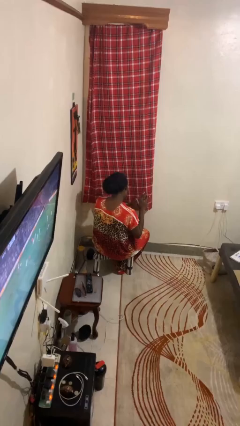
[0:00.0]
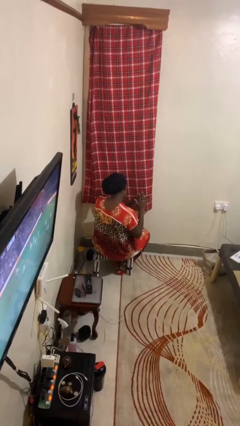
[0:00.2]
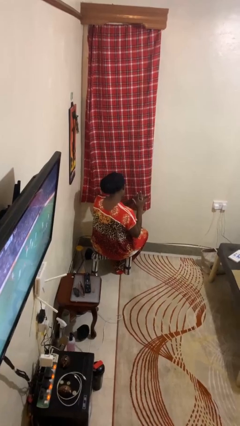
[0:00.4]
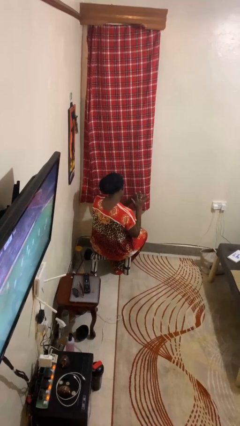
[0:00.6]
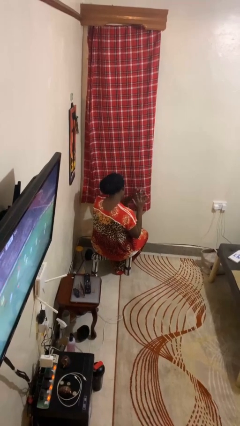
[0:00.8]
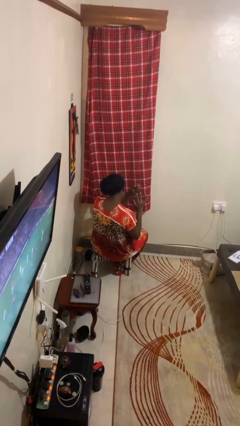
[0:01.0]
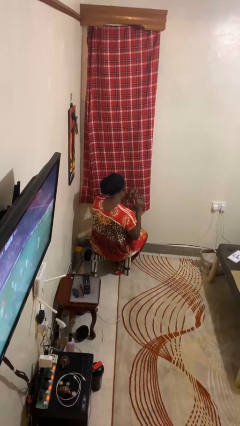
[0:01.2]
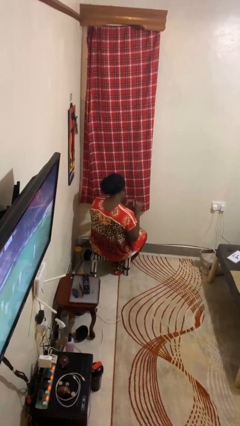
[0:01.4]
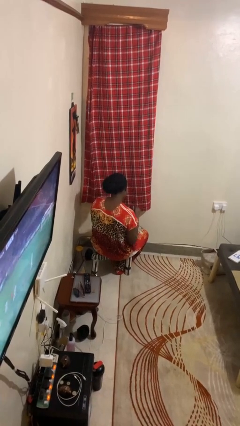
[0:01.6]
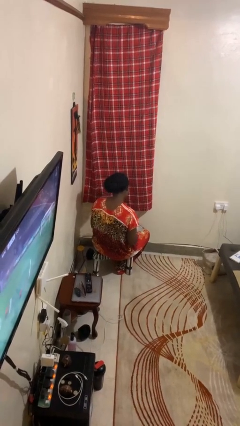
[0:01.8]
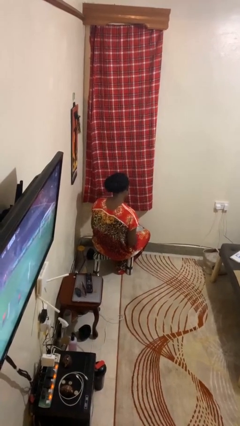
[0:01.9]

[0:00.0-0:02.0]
person takes off ring

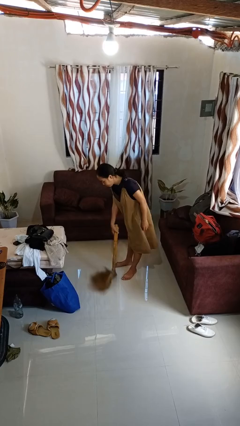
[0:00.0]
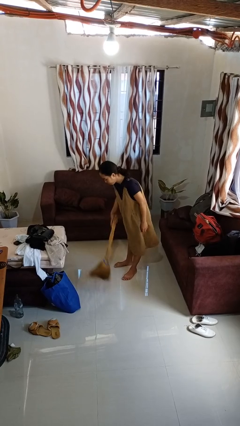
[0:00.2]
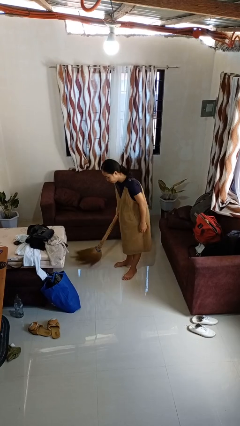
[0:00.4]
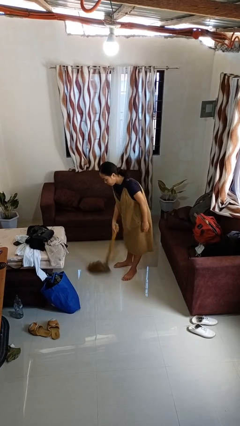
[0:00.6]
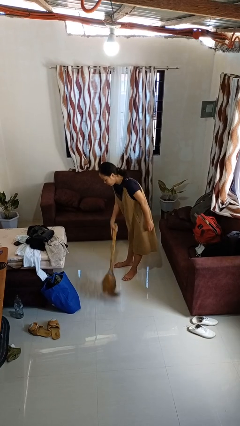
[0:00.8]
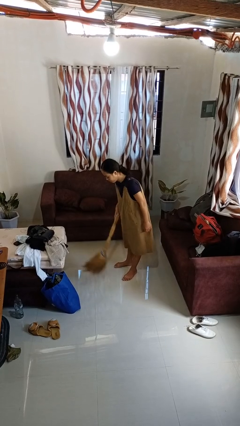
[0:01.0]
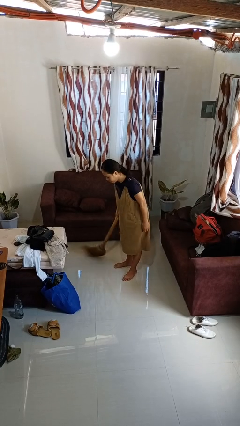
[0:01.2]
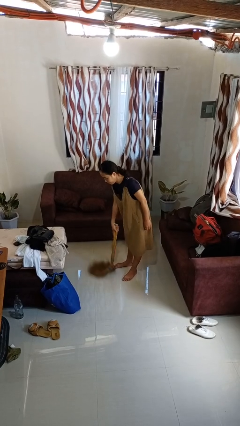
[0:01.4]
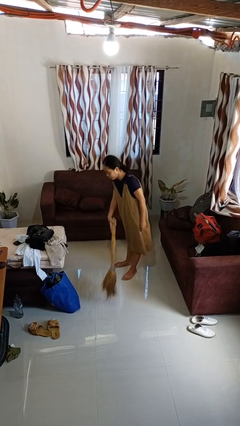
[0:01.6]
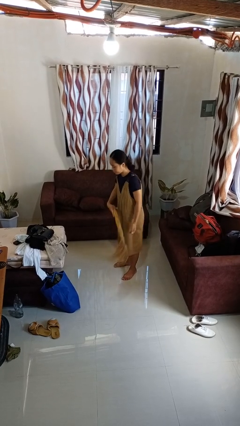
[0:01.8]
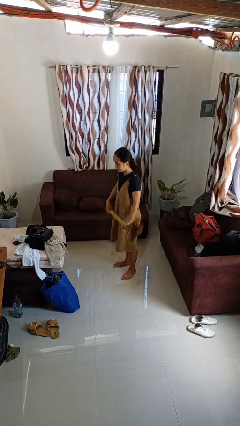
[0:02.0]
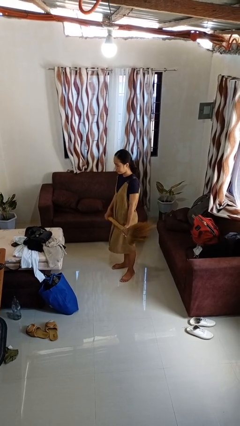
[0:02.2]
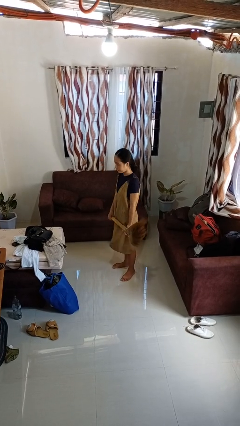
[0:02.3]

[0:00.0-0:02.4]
person sweeps floor

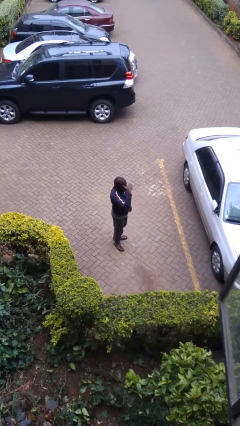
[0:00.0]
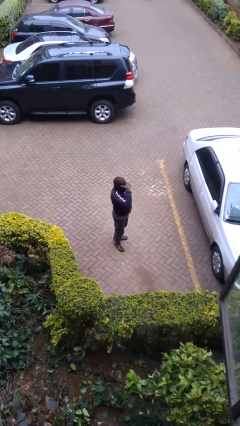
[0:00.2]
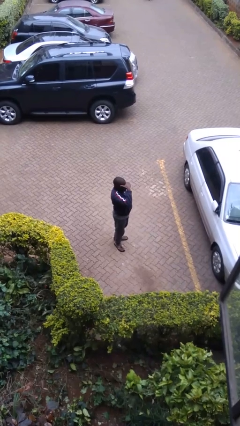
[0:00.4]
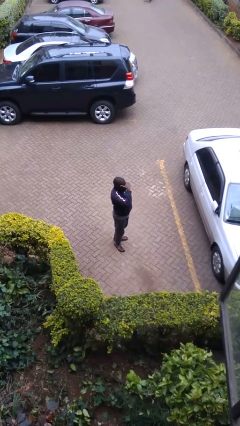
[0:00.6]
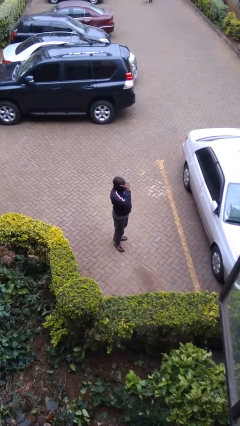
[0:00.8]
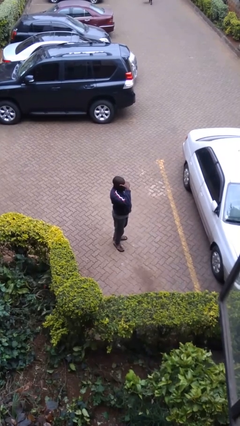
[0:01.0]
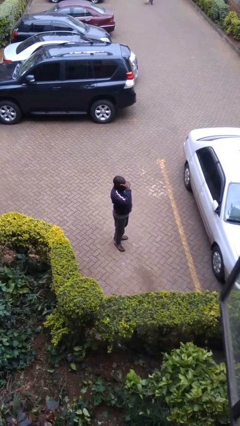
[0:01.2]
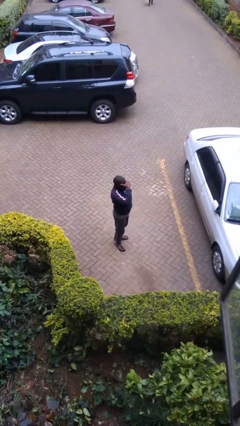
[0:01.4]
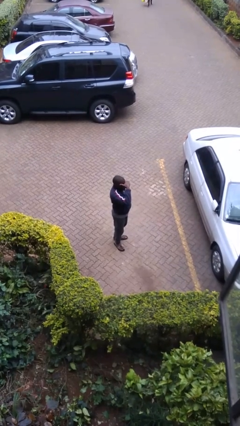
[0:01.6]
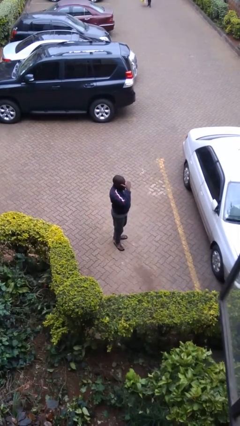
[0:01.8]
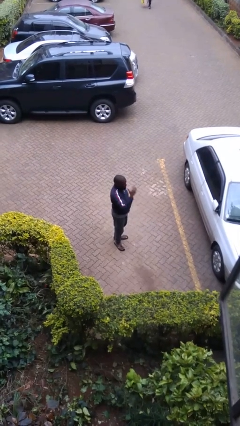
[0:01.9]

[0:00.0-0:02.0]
person shades eyes

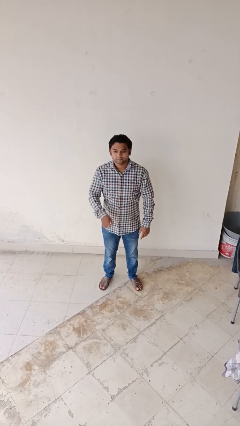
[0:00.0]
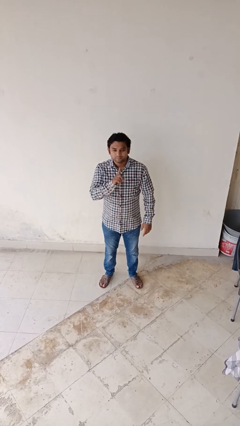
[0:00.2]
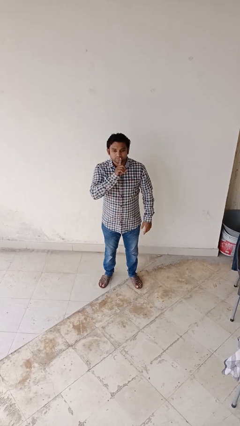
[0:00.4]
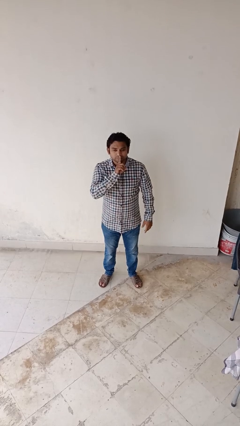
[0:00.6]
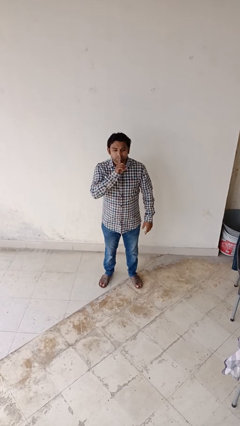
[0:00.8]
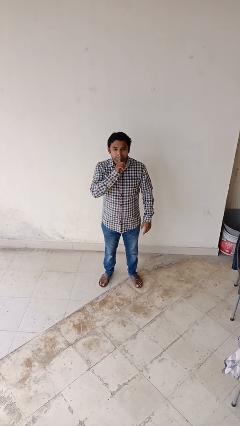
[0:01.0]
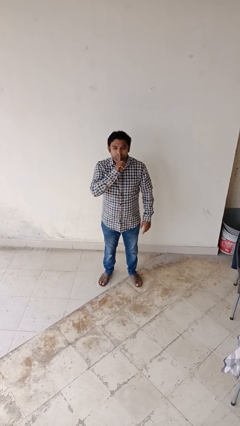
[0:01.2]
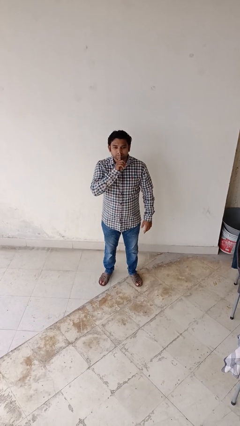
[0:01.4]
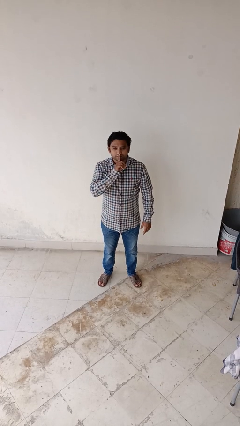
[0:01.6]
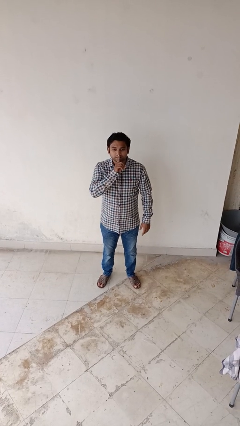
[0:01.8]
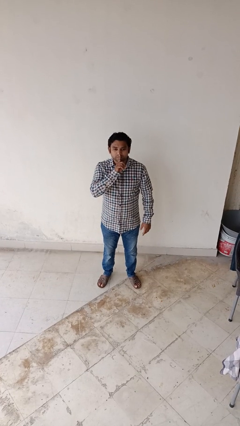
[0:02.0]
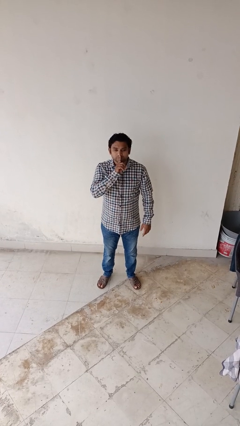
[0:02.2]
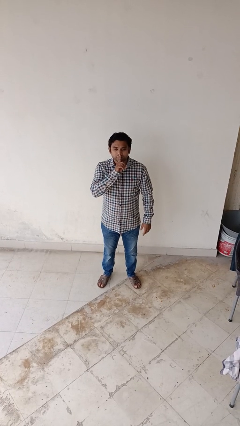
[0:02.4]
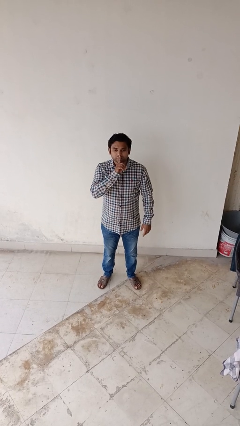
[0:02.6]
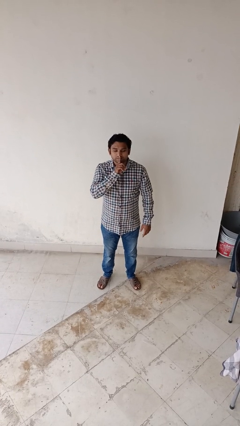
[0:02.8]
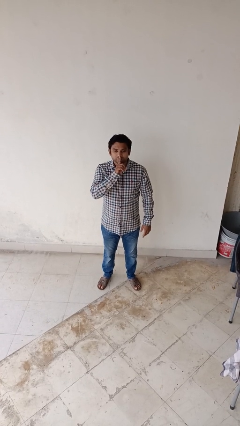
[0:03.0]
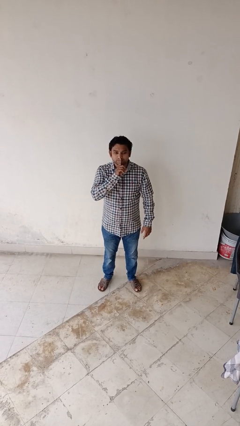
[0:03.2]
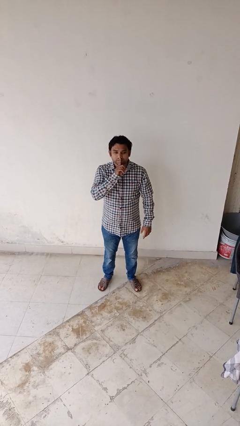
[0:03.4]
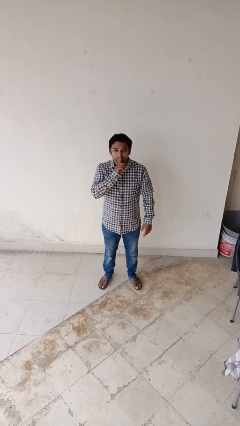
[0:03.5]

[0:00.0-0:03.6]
person gestures be quiet

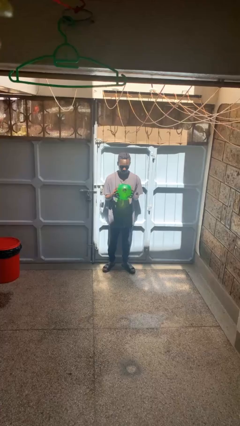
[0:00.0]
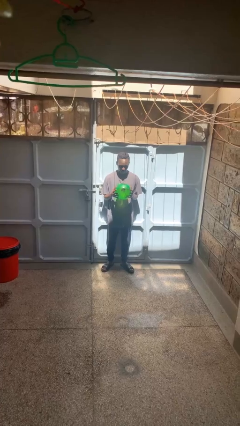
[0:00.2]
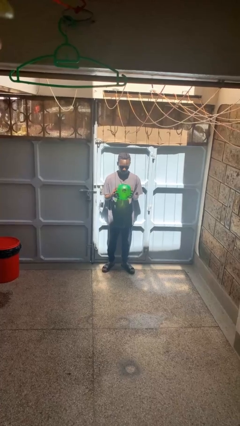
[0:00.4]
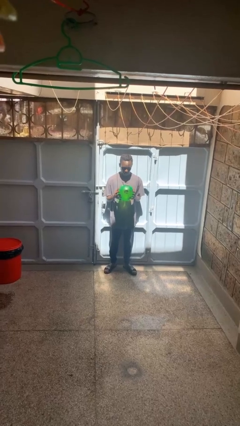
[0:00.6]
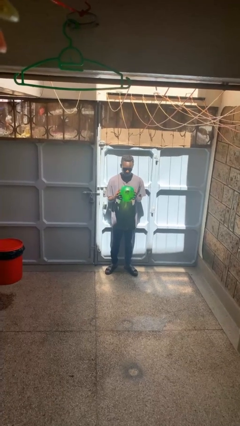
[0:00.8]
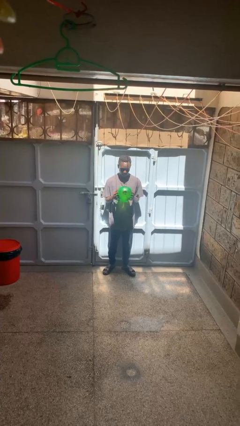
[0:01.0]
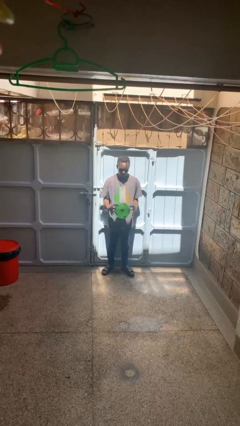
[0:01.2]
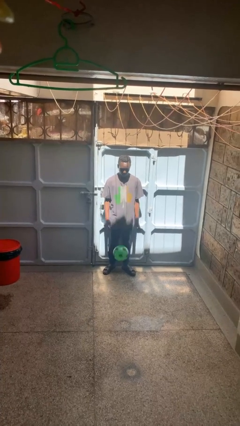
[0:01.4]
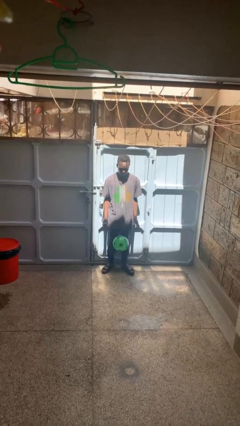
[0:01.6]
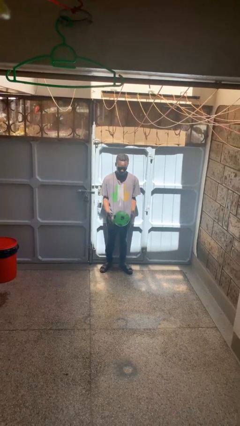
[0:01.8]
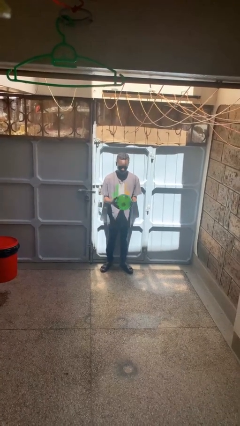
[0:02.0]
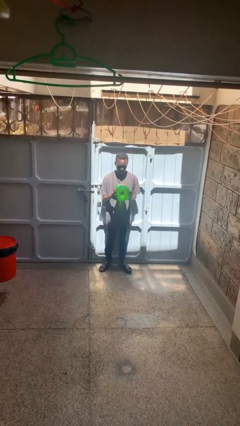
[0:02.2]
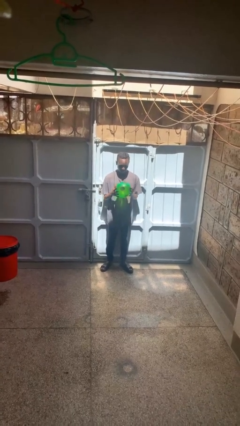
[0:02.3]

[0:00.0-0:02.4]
person bounces ball on floor

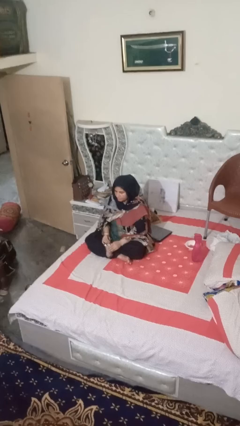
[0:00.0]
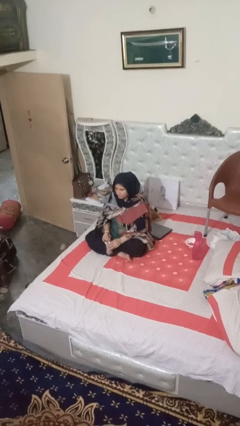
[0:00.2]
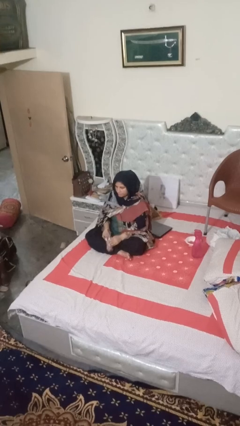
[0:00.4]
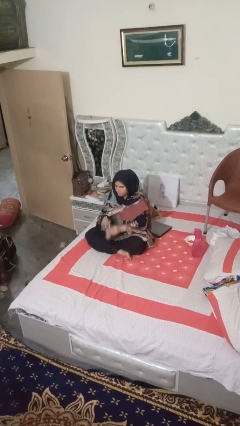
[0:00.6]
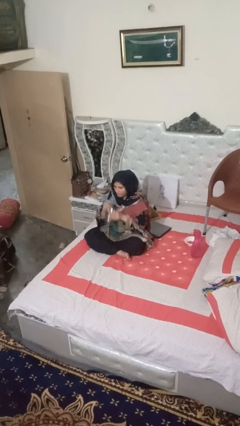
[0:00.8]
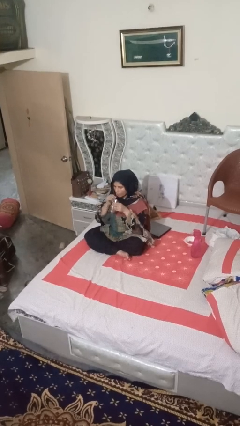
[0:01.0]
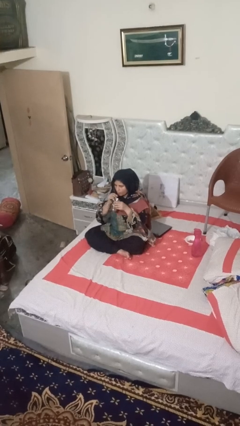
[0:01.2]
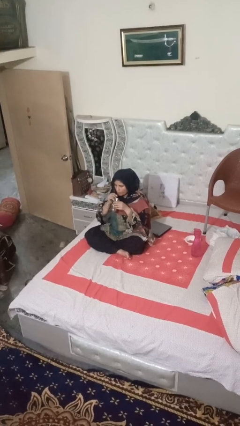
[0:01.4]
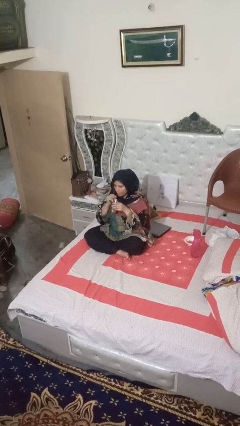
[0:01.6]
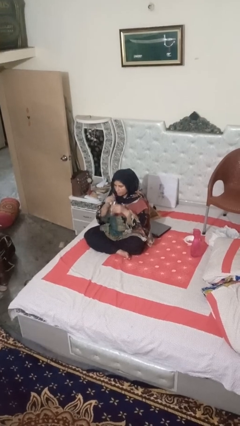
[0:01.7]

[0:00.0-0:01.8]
person drinks from straw

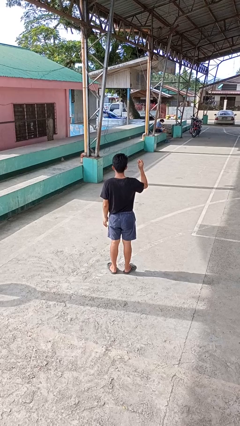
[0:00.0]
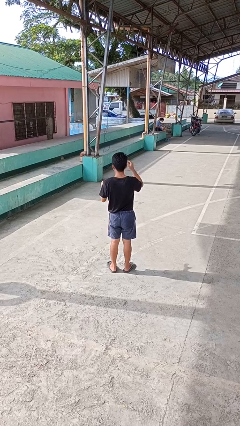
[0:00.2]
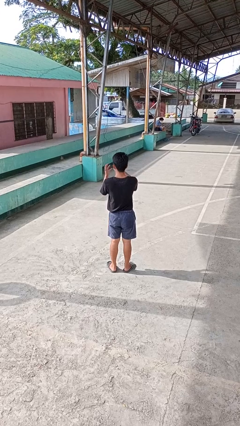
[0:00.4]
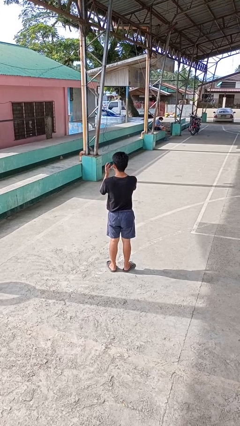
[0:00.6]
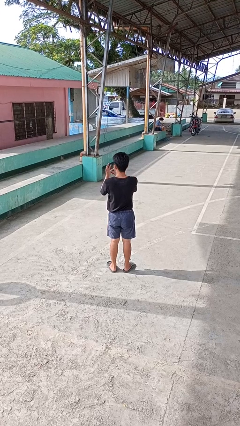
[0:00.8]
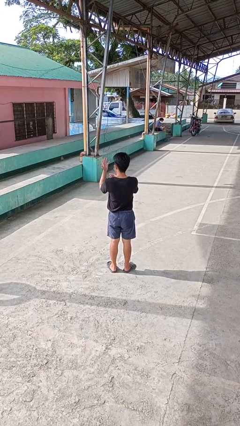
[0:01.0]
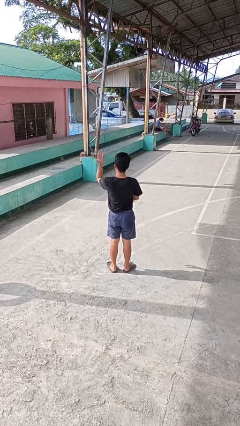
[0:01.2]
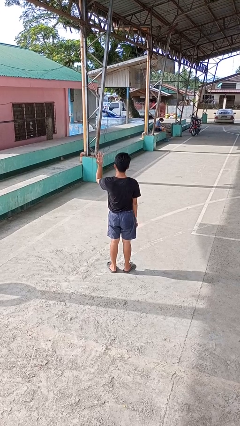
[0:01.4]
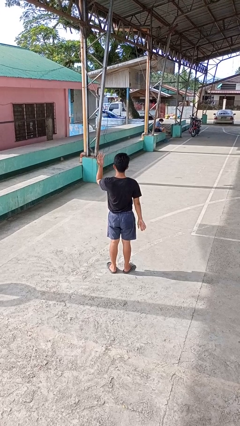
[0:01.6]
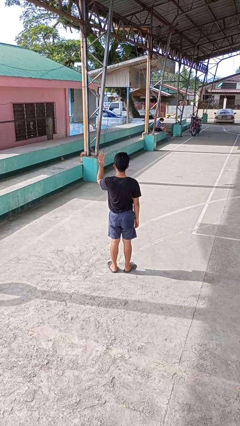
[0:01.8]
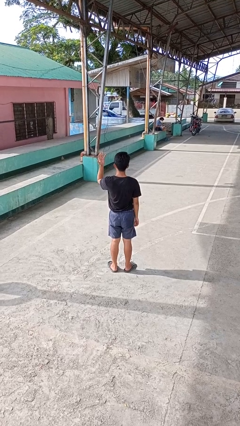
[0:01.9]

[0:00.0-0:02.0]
person puts on ring

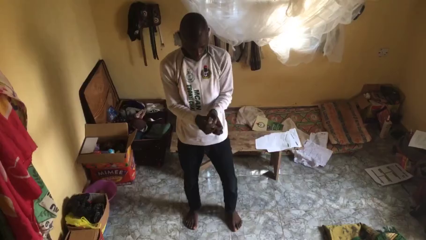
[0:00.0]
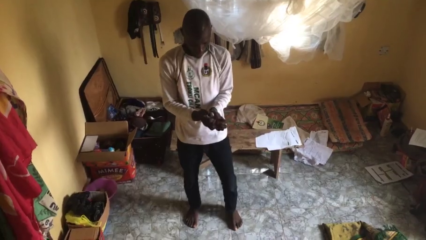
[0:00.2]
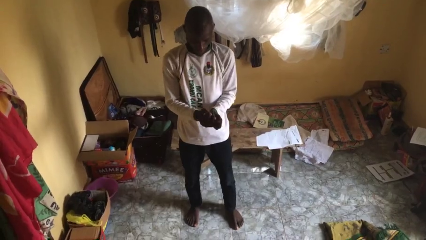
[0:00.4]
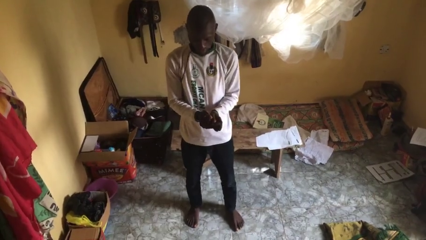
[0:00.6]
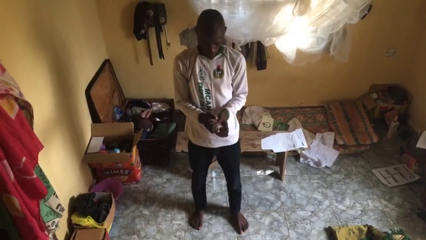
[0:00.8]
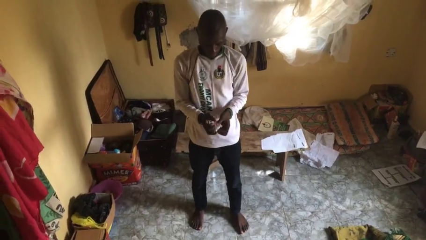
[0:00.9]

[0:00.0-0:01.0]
person crumples paper
